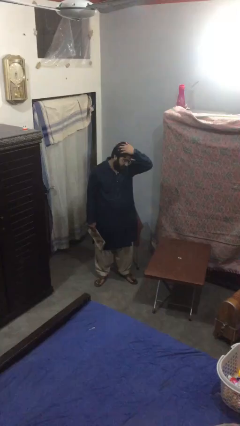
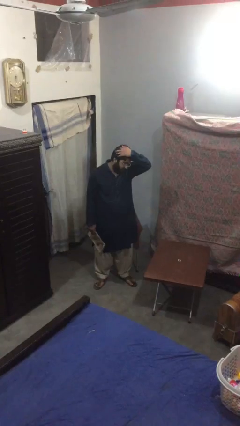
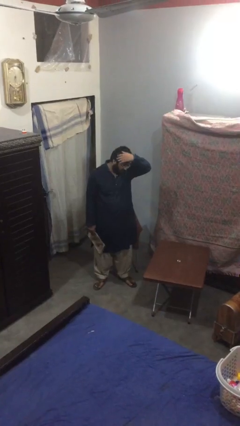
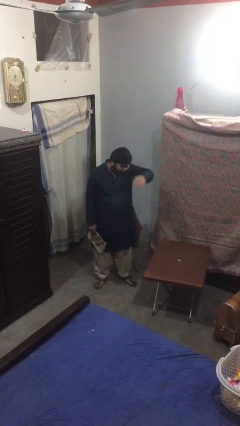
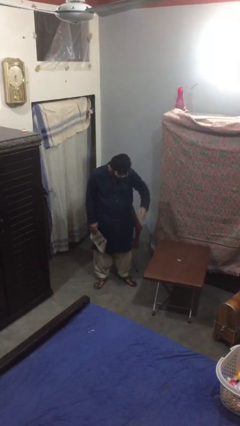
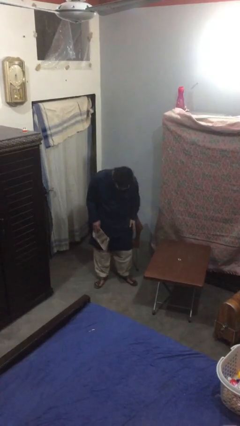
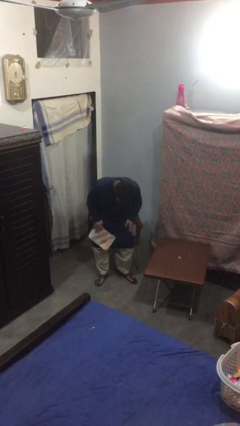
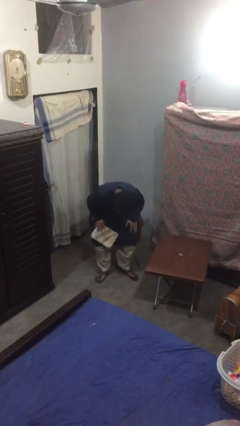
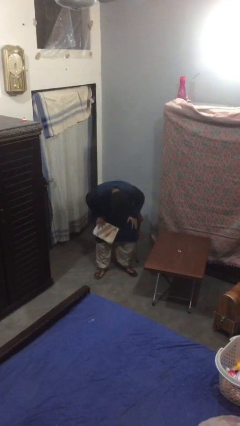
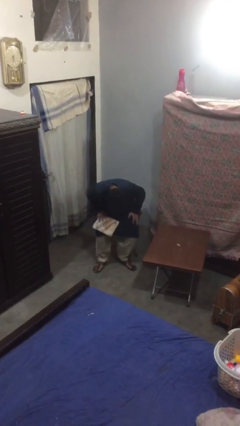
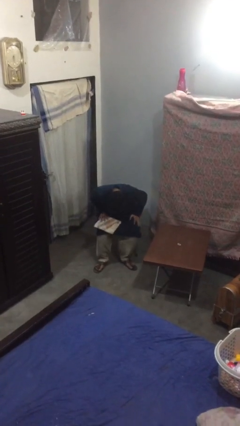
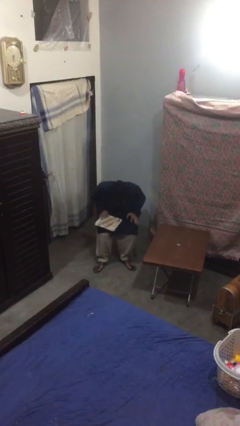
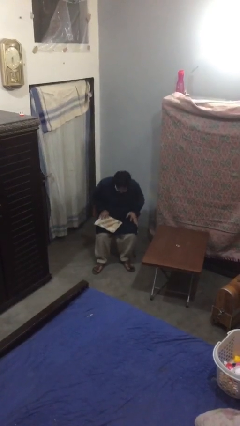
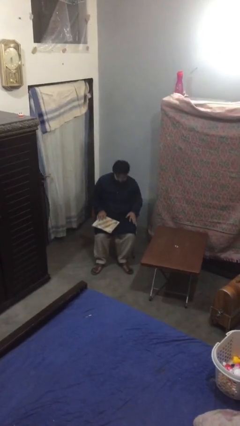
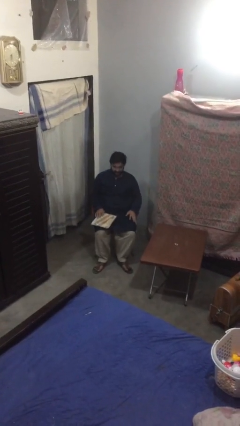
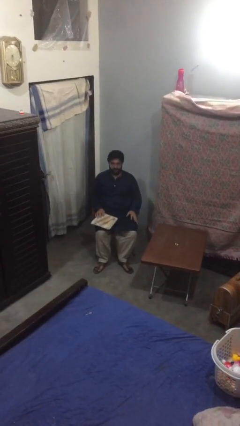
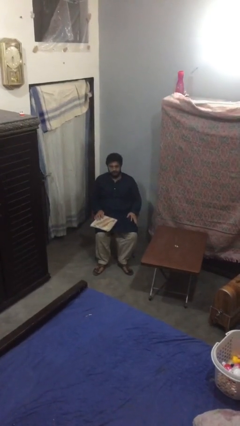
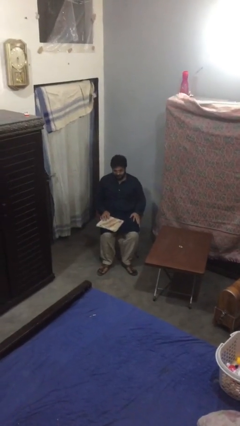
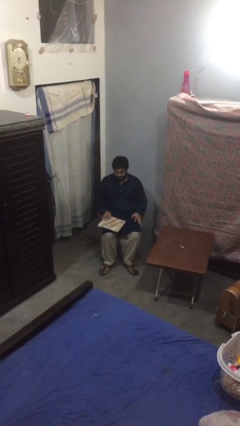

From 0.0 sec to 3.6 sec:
person sits down

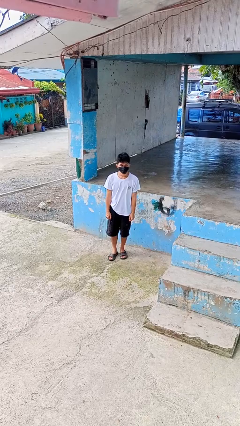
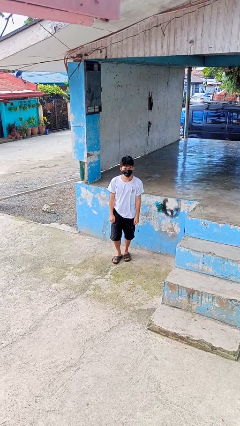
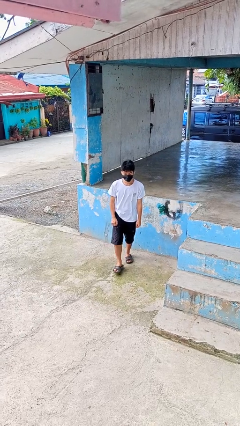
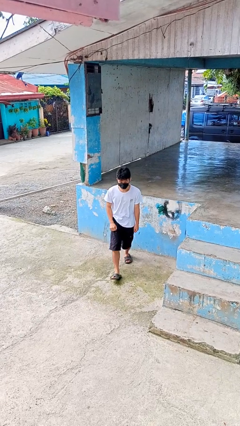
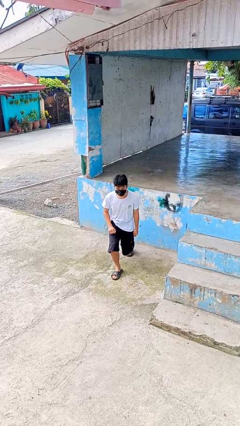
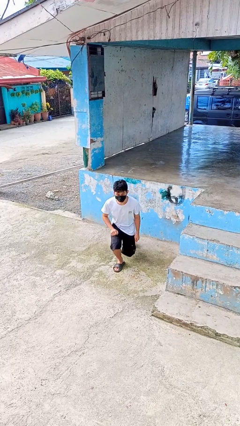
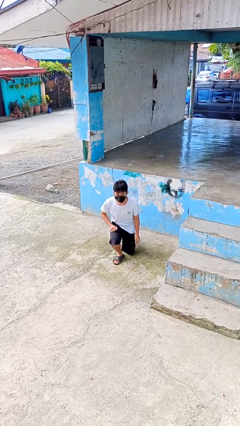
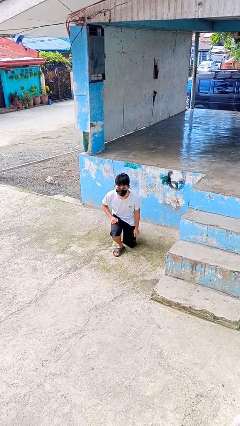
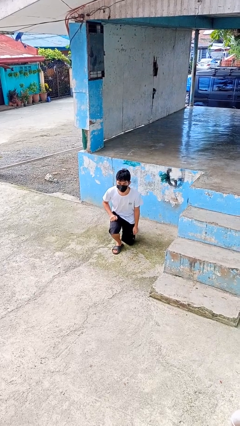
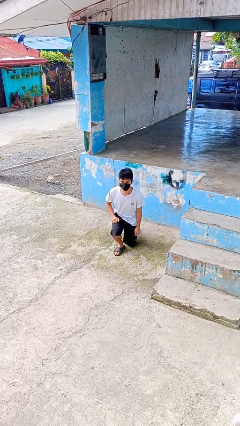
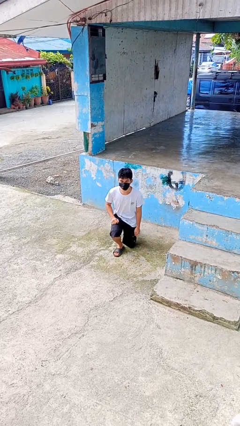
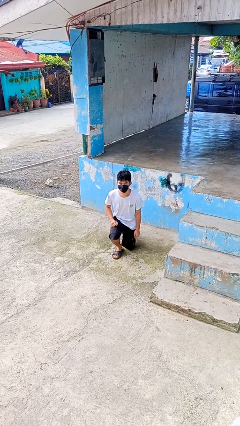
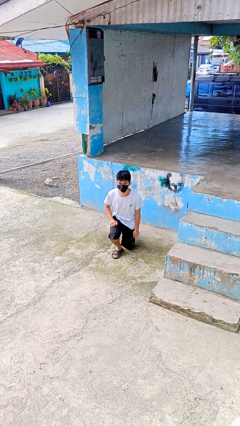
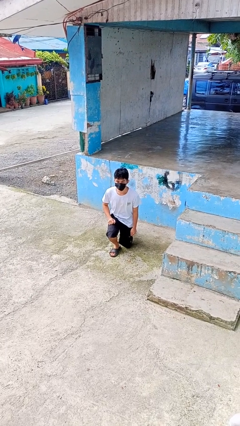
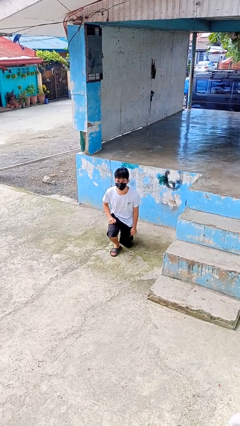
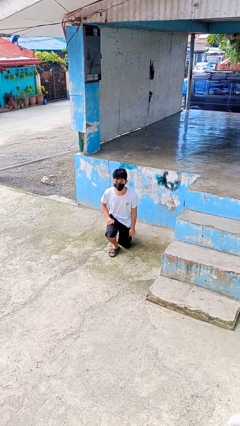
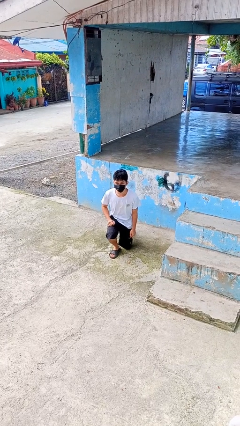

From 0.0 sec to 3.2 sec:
person kneels

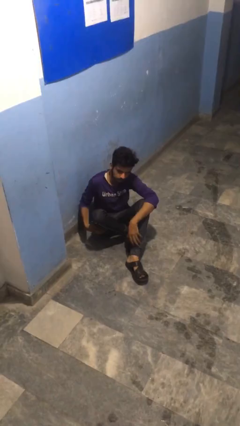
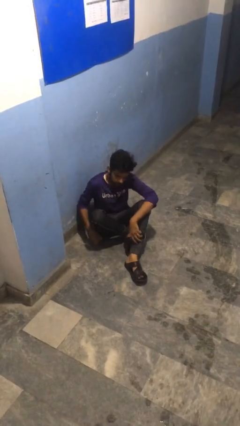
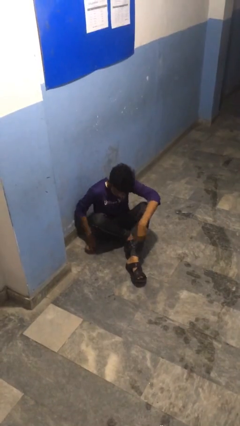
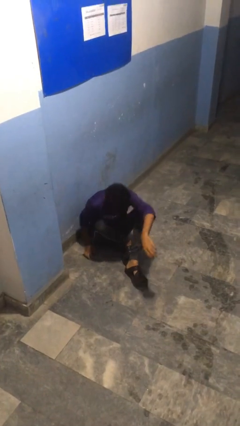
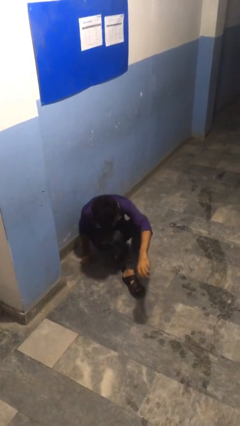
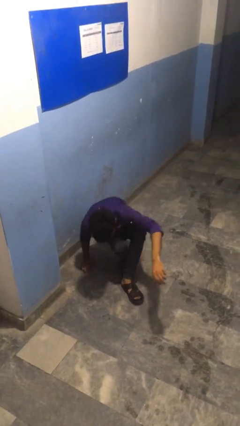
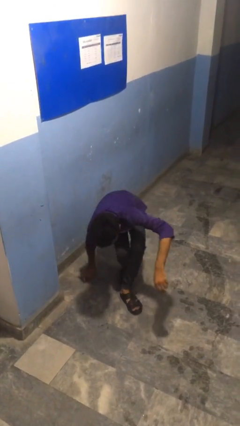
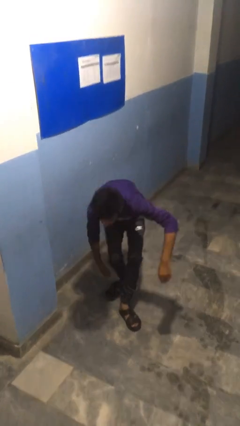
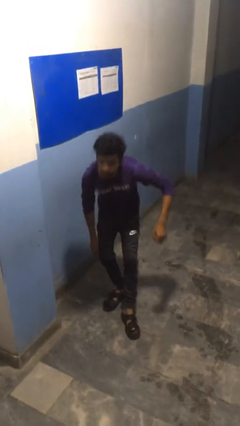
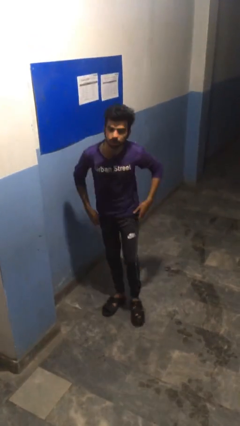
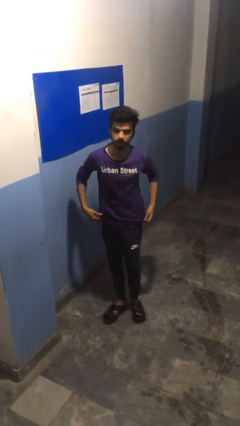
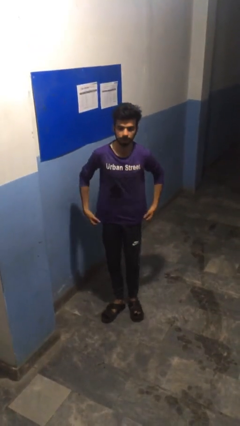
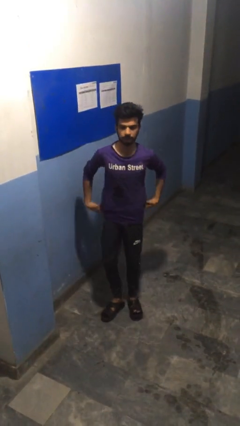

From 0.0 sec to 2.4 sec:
person stands up from floor

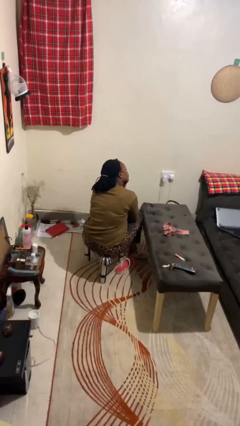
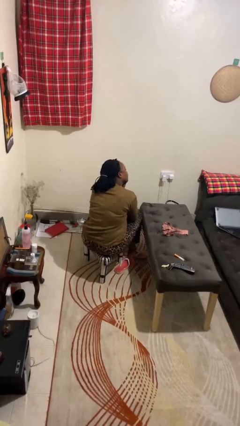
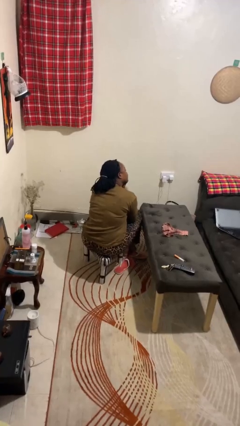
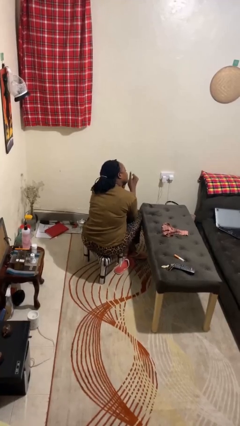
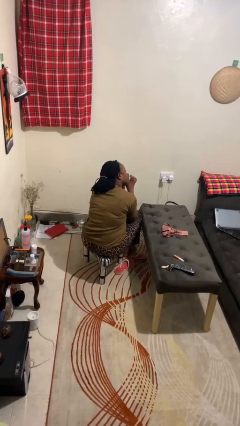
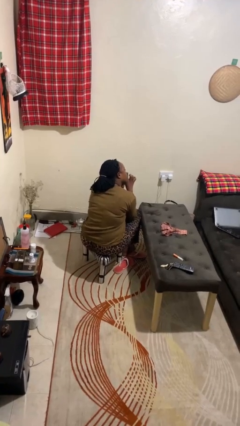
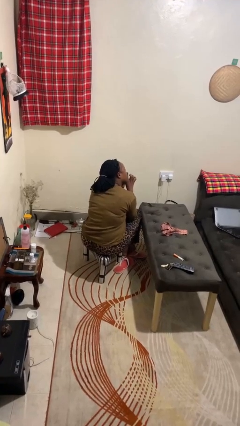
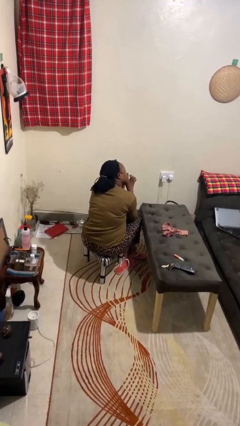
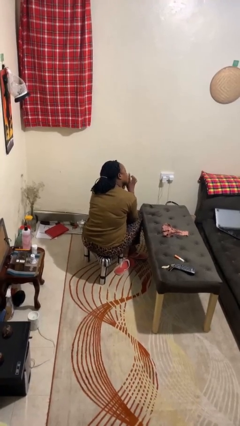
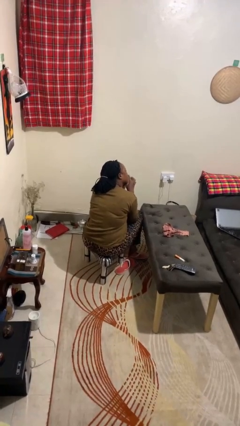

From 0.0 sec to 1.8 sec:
person gestures be quiet

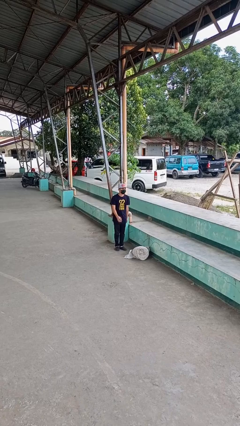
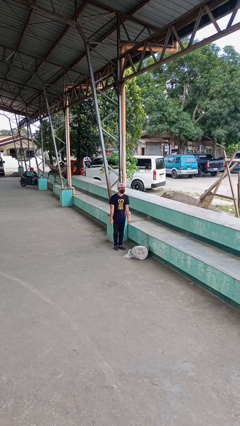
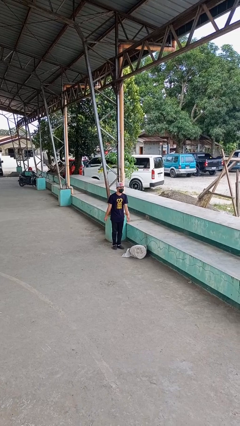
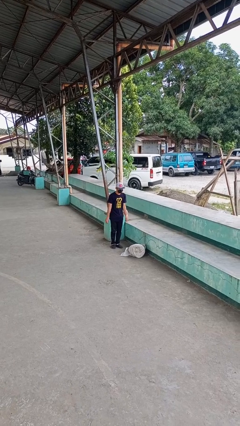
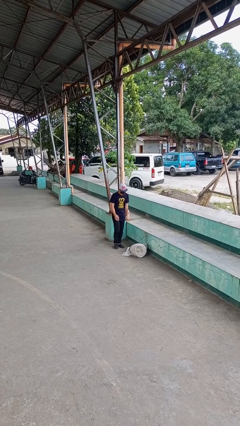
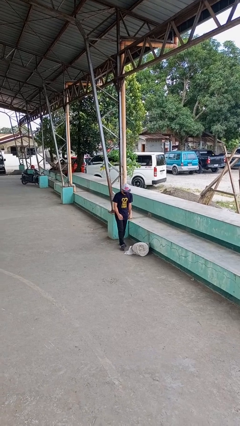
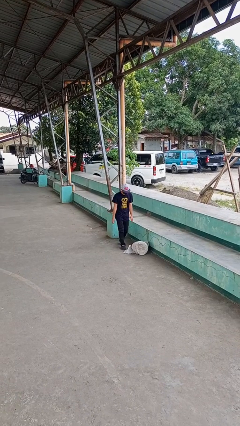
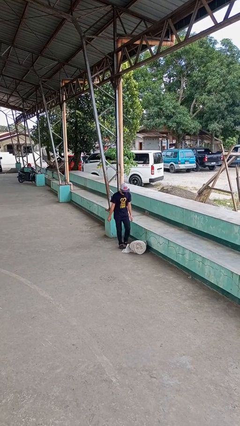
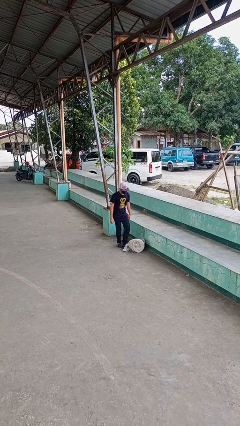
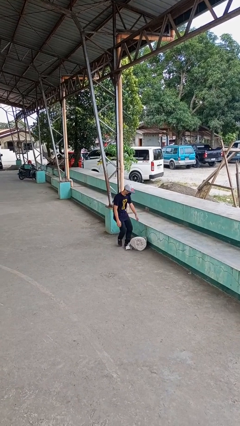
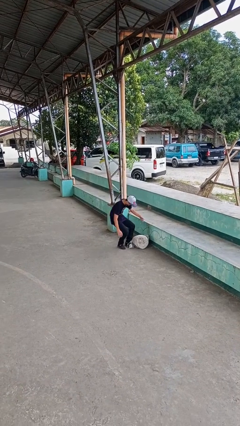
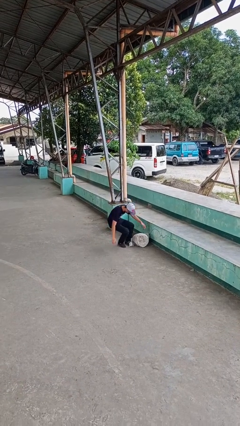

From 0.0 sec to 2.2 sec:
person trips on object on floor

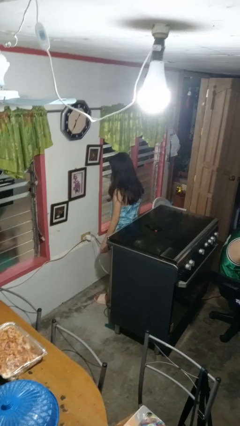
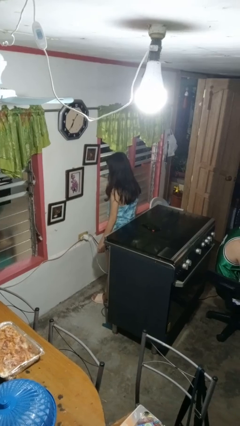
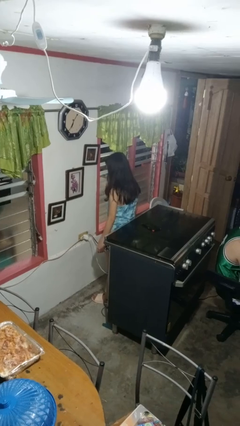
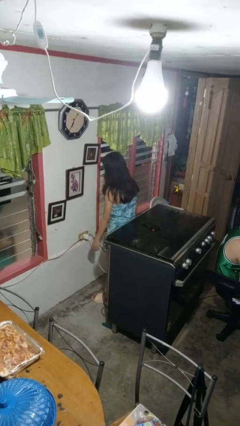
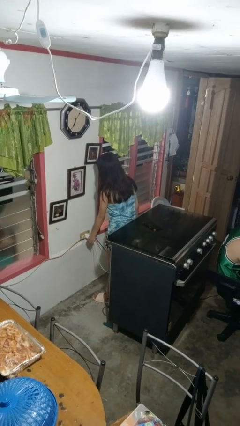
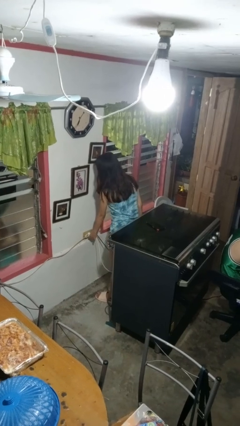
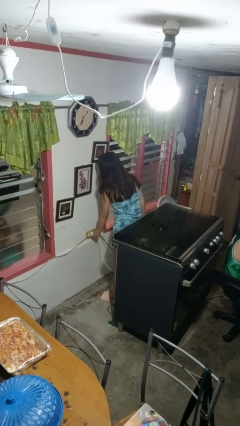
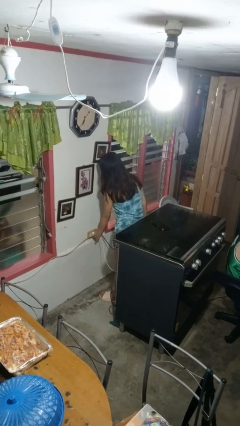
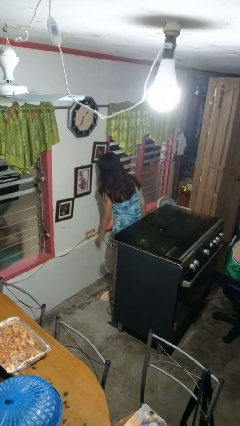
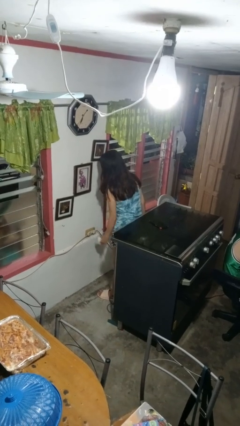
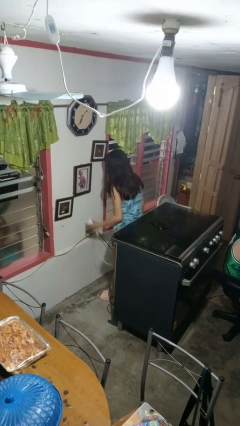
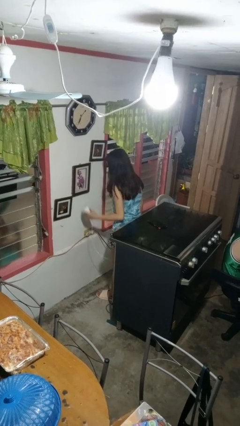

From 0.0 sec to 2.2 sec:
person unplugs from electrical socket

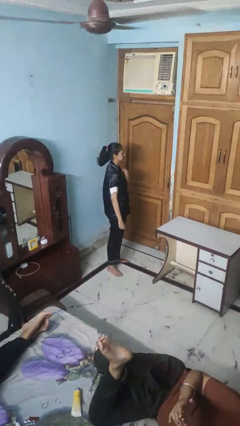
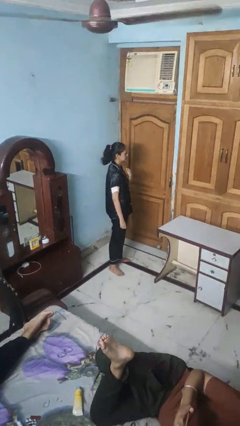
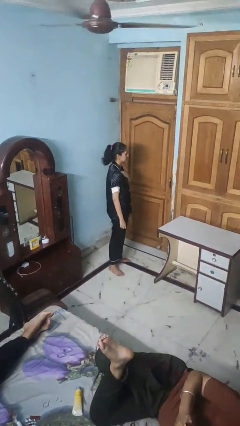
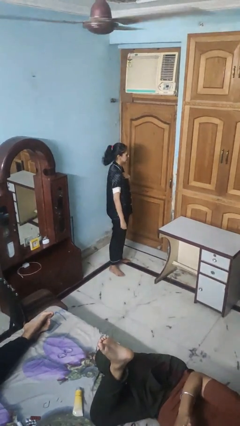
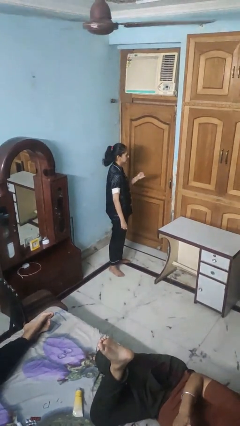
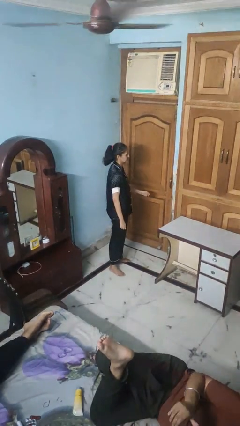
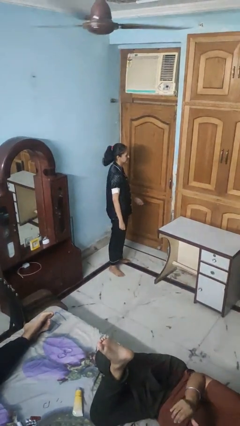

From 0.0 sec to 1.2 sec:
person drums on chest

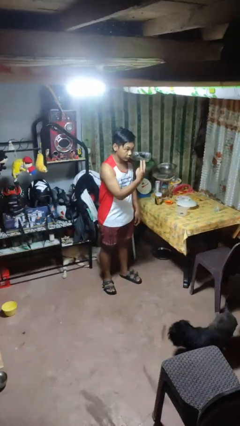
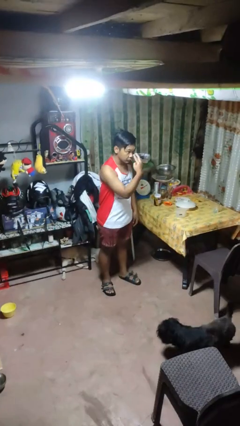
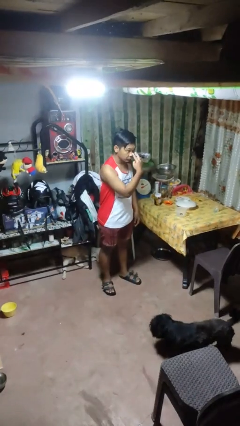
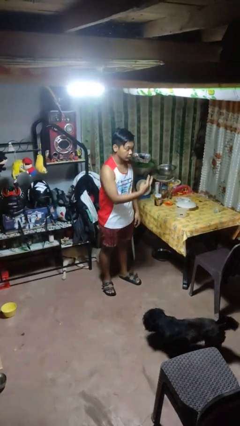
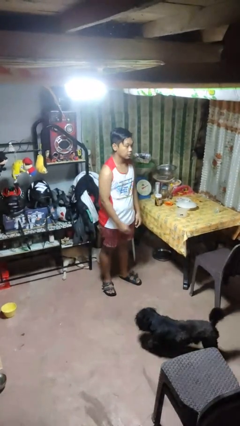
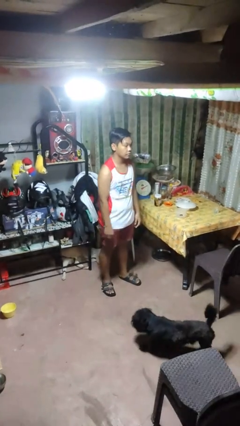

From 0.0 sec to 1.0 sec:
person gestures watch closely
